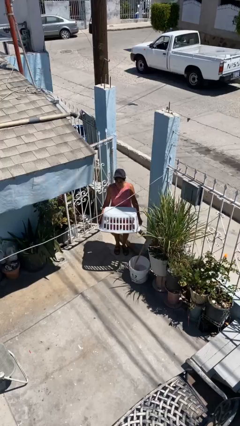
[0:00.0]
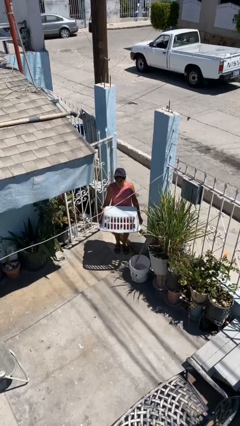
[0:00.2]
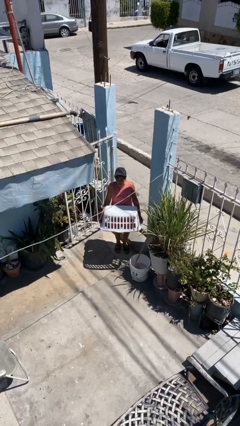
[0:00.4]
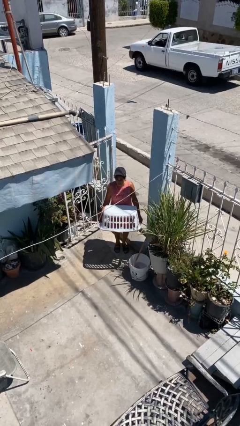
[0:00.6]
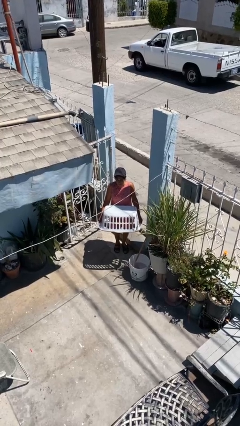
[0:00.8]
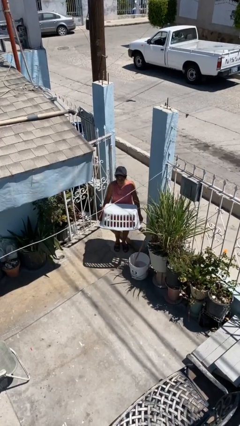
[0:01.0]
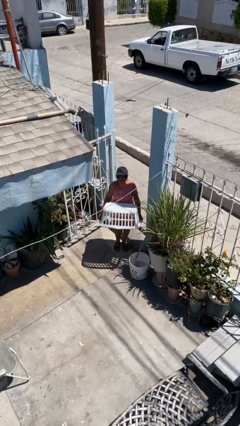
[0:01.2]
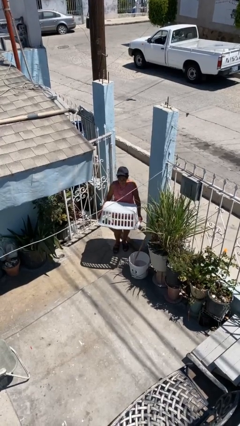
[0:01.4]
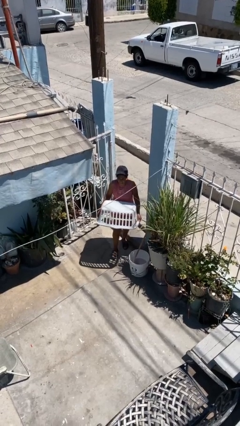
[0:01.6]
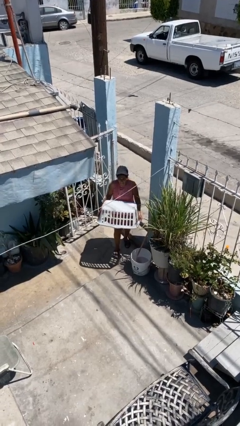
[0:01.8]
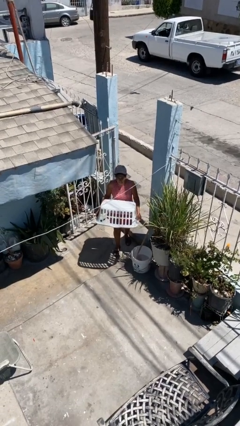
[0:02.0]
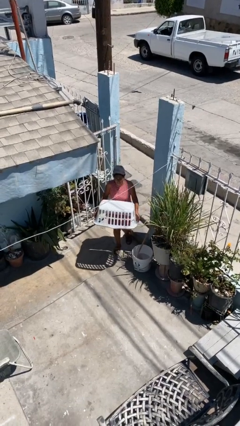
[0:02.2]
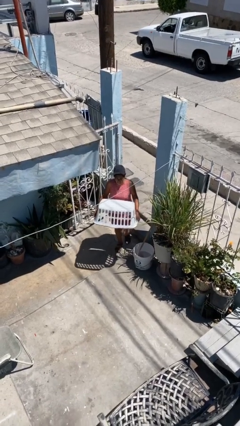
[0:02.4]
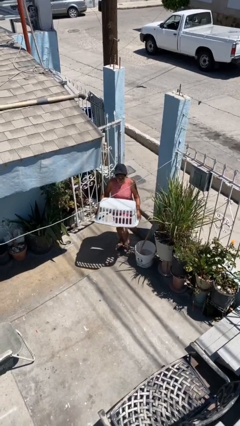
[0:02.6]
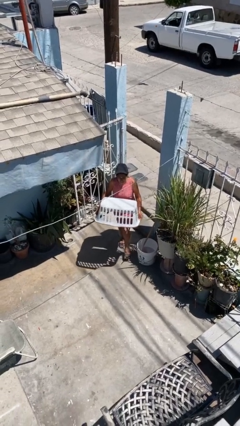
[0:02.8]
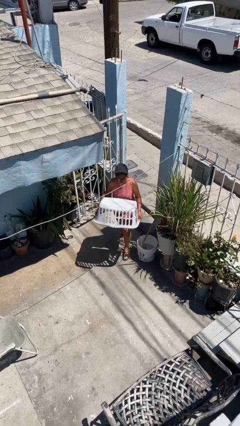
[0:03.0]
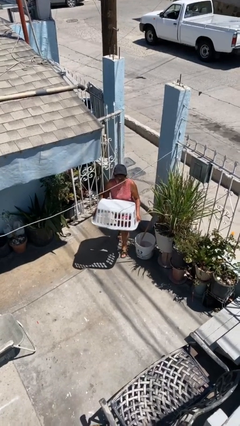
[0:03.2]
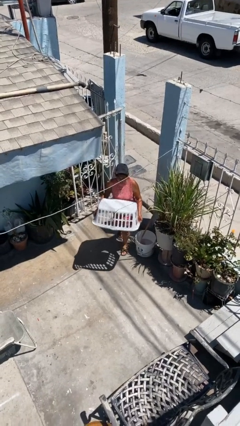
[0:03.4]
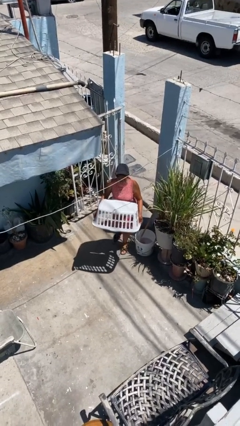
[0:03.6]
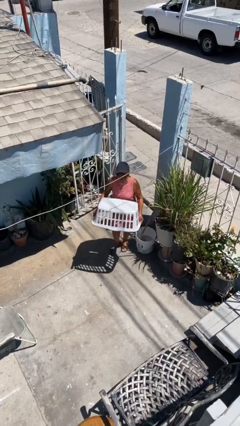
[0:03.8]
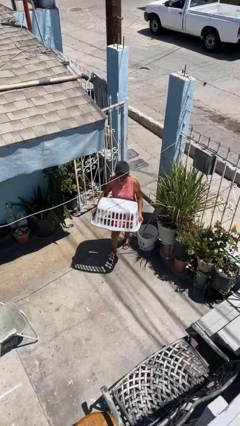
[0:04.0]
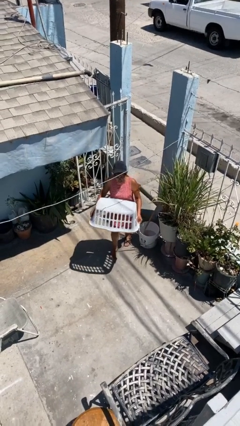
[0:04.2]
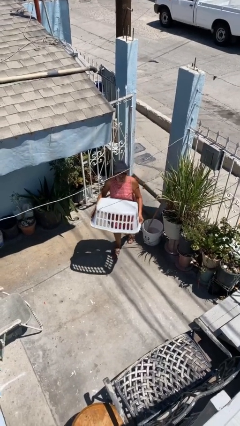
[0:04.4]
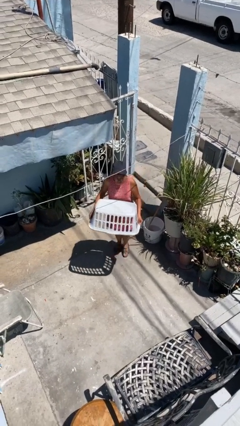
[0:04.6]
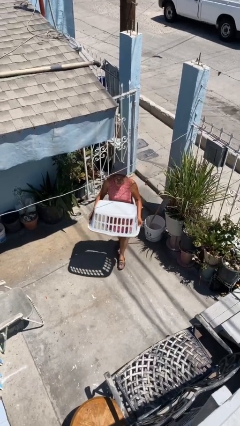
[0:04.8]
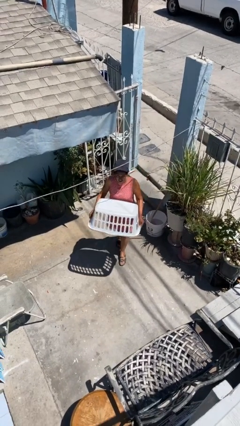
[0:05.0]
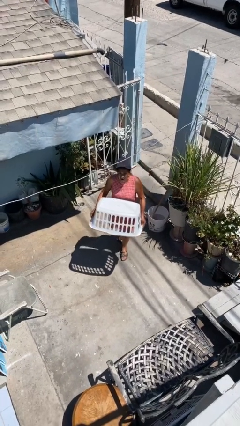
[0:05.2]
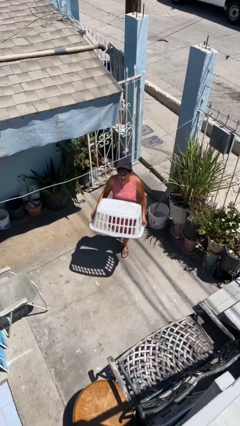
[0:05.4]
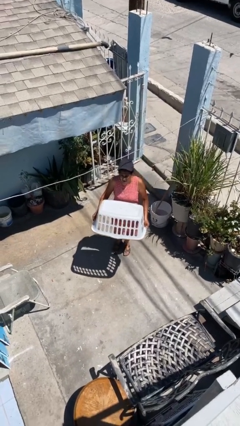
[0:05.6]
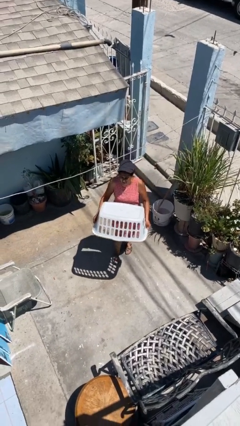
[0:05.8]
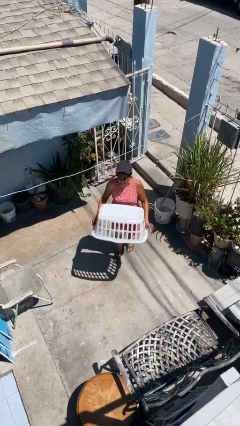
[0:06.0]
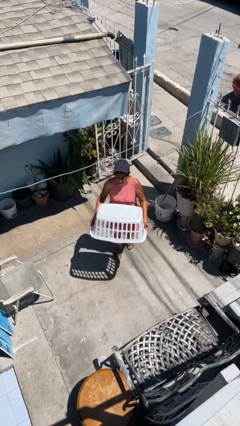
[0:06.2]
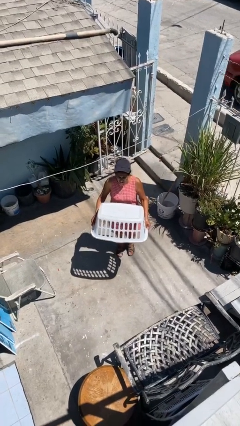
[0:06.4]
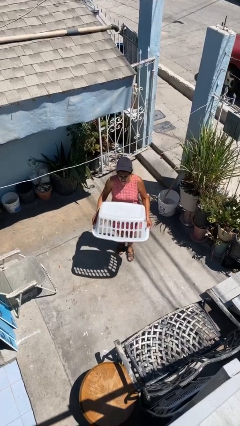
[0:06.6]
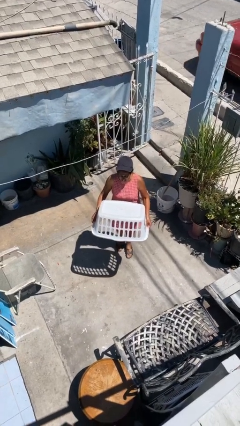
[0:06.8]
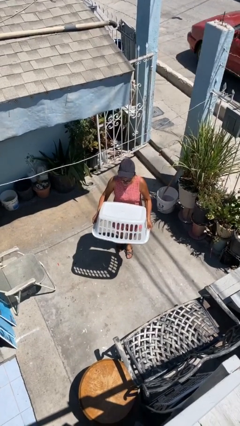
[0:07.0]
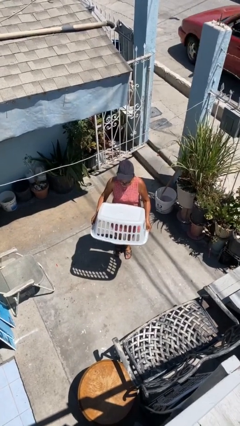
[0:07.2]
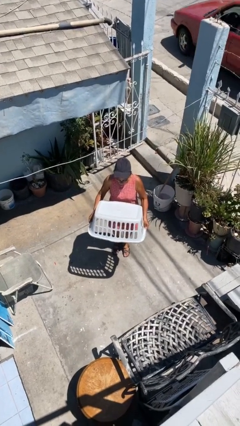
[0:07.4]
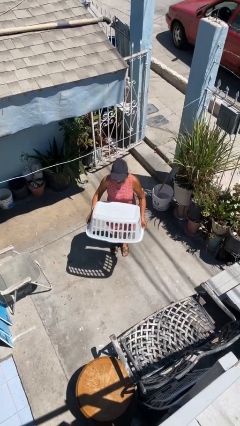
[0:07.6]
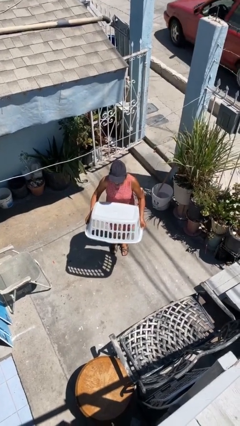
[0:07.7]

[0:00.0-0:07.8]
person carries heavy object

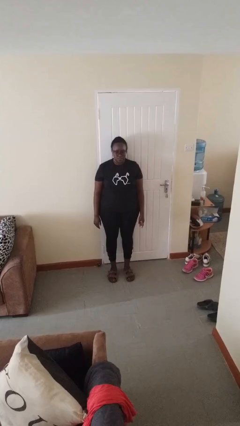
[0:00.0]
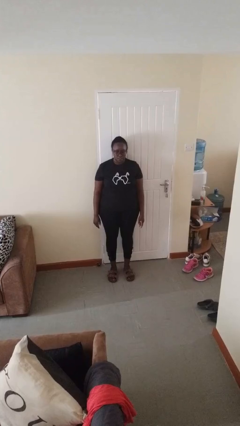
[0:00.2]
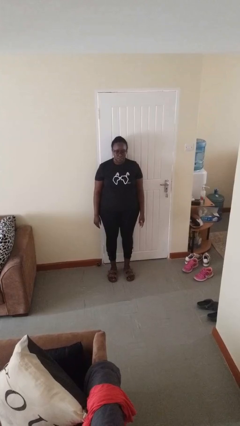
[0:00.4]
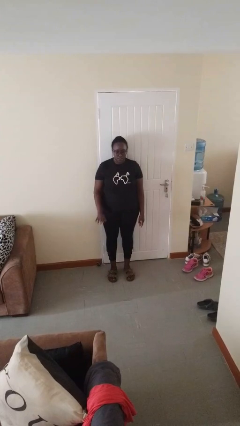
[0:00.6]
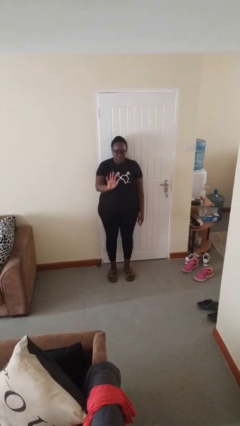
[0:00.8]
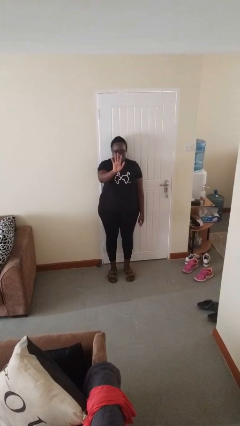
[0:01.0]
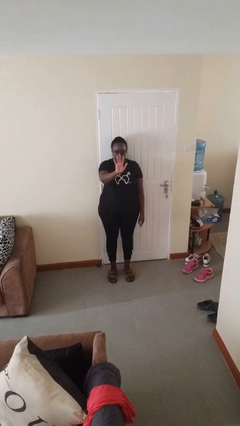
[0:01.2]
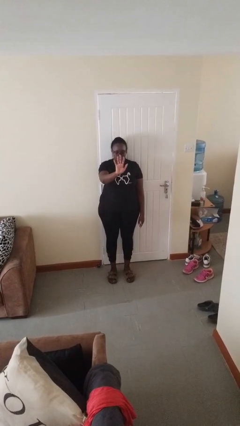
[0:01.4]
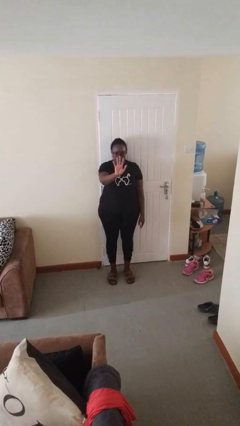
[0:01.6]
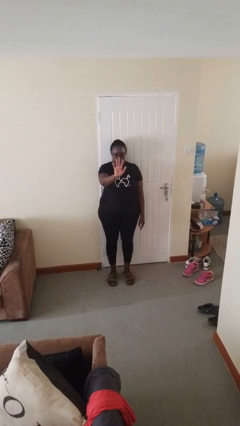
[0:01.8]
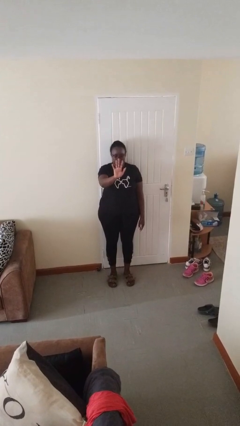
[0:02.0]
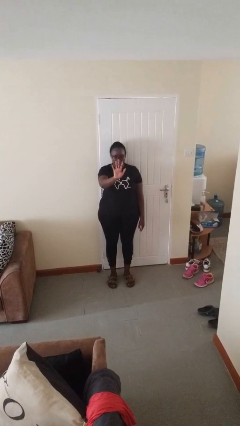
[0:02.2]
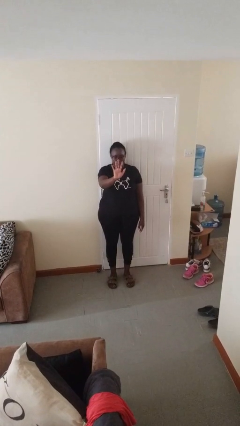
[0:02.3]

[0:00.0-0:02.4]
person gestures number five

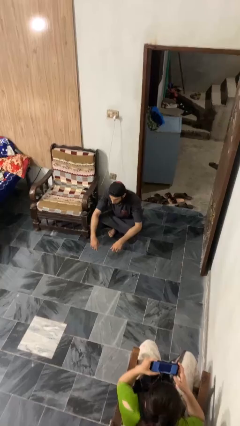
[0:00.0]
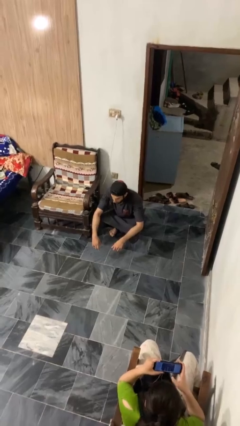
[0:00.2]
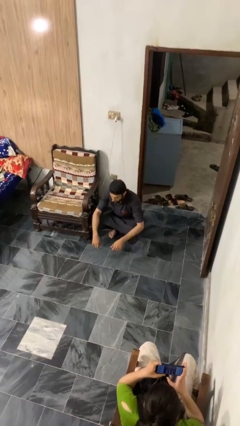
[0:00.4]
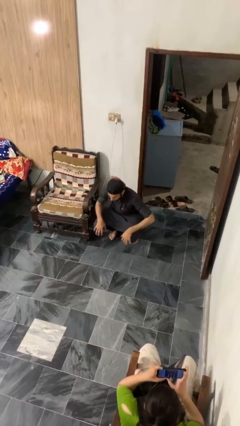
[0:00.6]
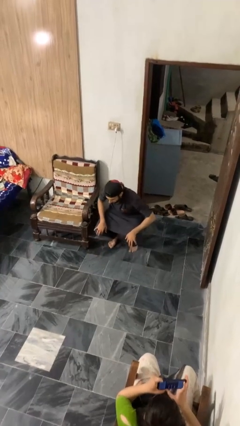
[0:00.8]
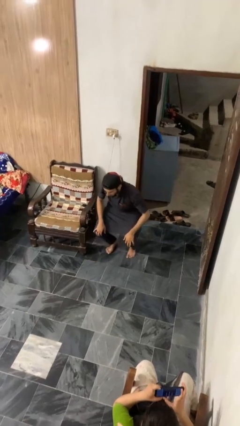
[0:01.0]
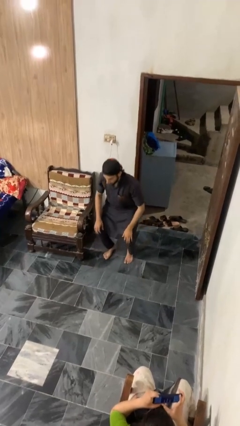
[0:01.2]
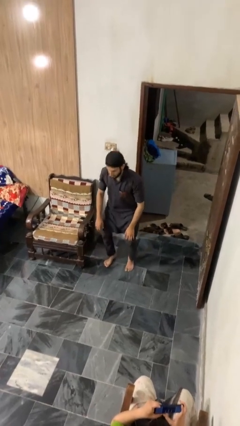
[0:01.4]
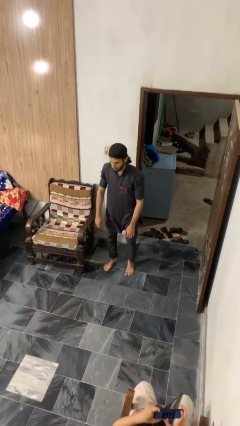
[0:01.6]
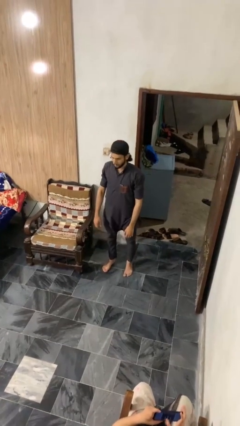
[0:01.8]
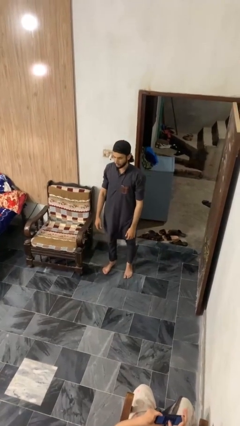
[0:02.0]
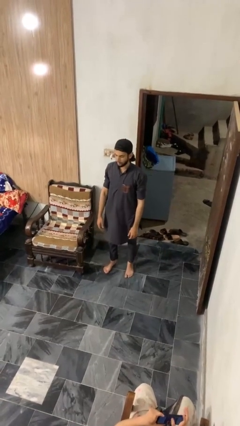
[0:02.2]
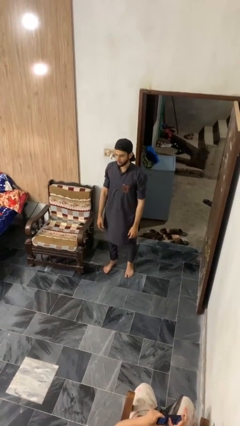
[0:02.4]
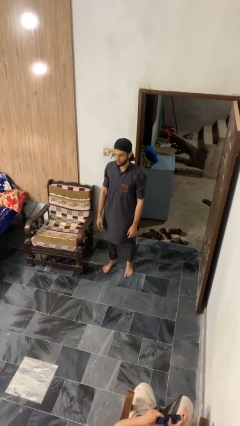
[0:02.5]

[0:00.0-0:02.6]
person stands up

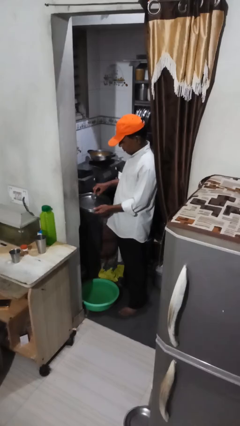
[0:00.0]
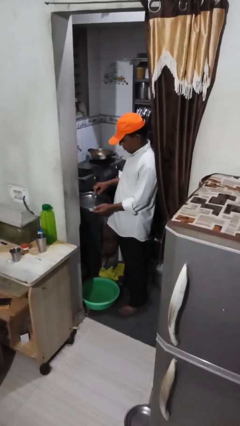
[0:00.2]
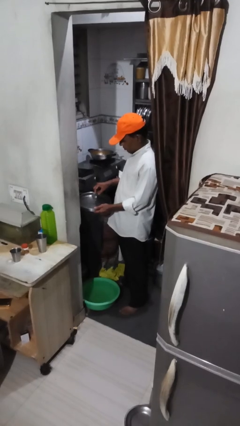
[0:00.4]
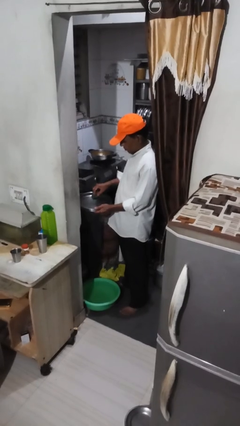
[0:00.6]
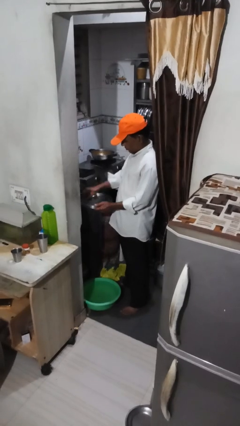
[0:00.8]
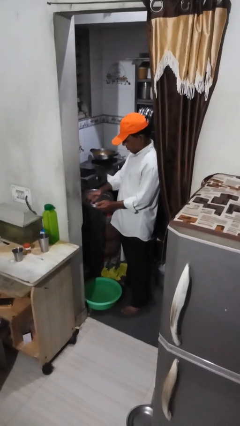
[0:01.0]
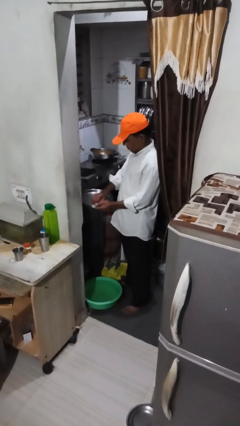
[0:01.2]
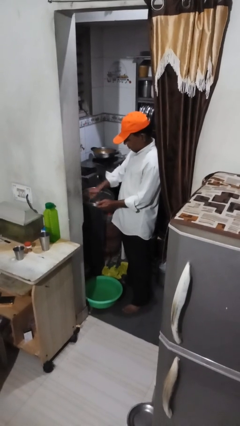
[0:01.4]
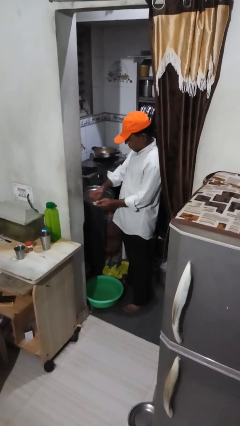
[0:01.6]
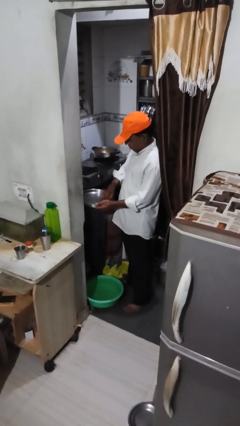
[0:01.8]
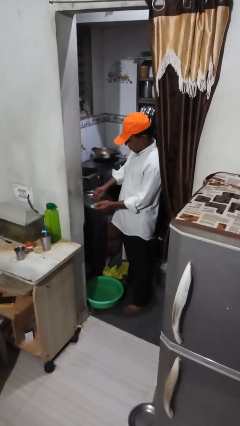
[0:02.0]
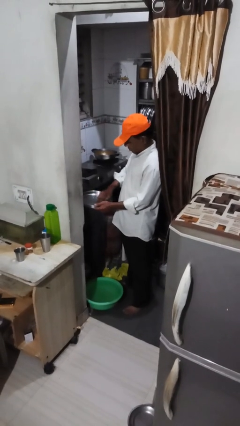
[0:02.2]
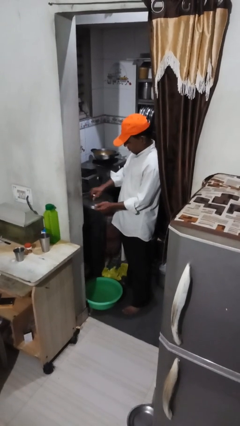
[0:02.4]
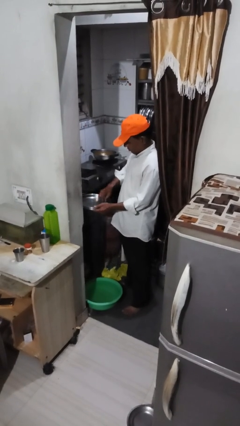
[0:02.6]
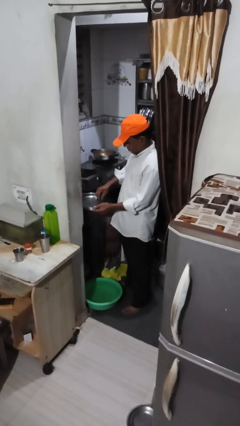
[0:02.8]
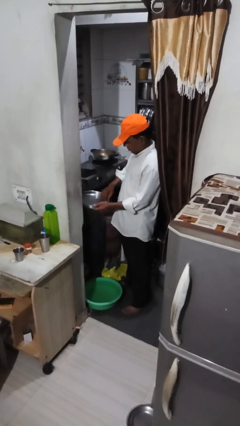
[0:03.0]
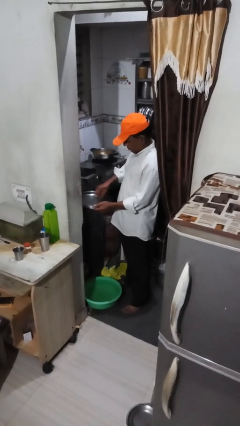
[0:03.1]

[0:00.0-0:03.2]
person washes dish

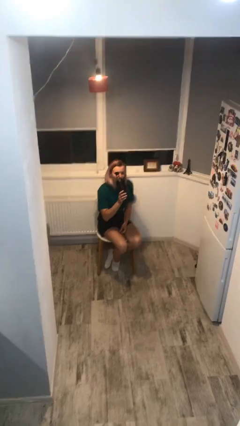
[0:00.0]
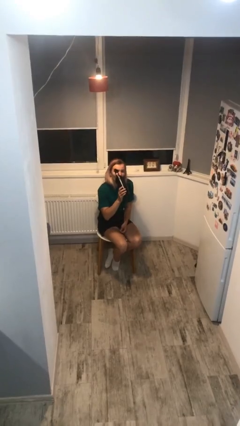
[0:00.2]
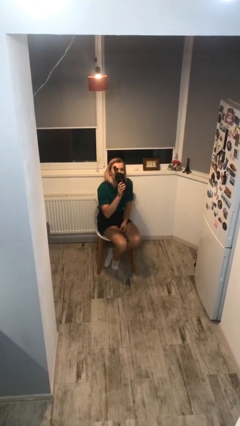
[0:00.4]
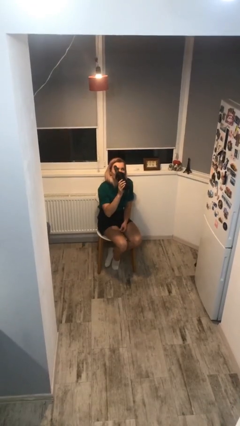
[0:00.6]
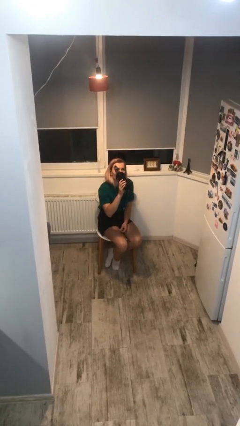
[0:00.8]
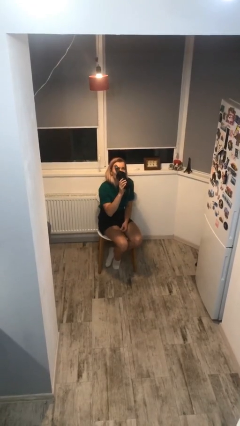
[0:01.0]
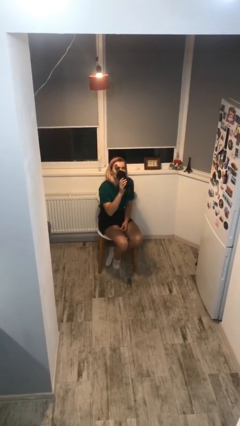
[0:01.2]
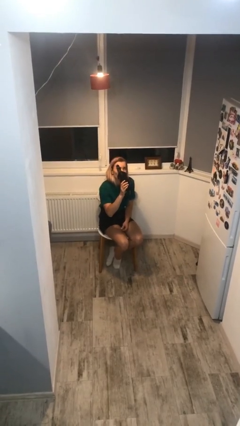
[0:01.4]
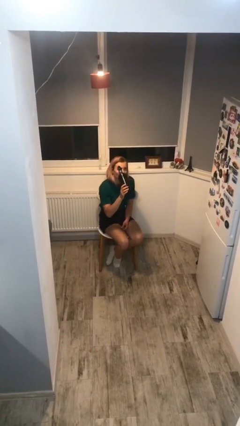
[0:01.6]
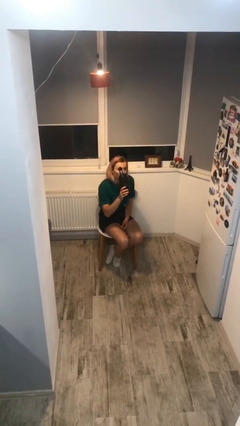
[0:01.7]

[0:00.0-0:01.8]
person drinks from bottle
